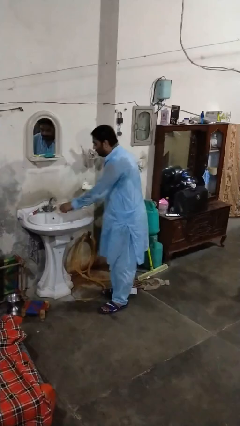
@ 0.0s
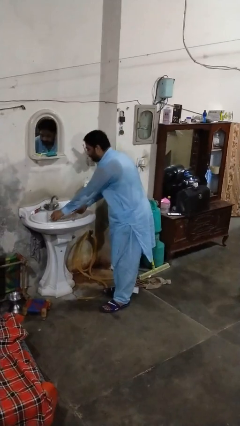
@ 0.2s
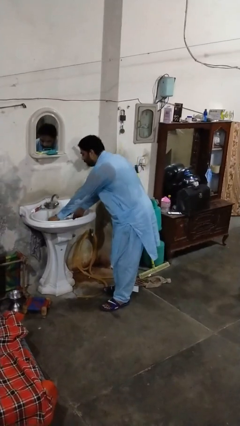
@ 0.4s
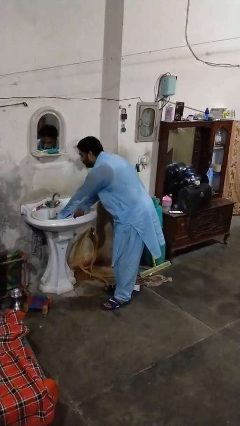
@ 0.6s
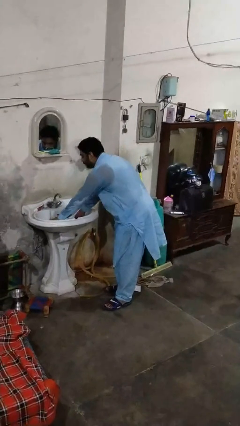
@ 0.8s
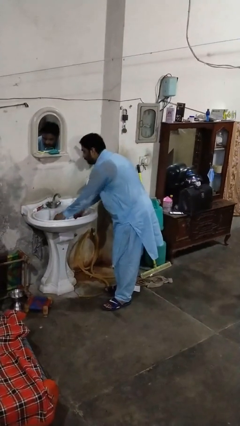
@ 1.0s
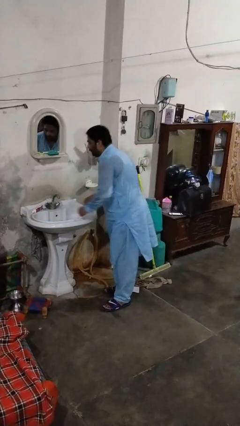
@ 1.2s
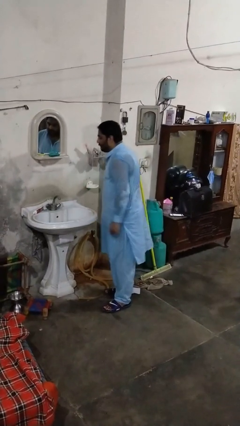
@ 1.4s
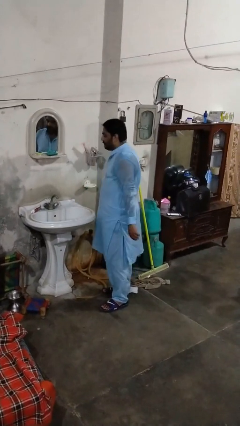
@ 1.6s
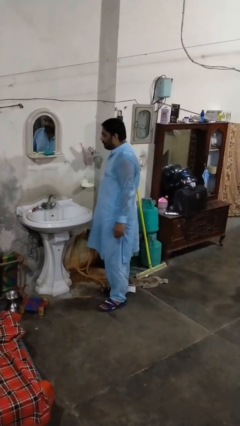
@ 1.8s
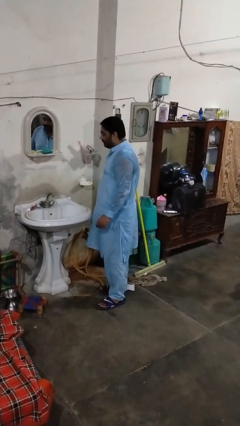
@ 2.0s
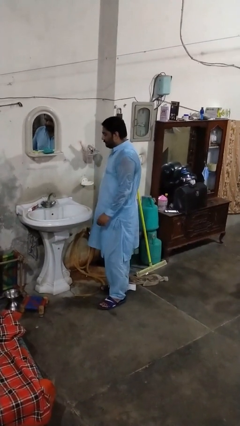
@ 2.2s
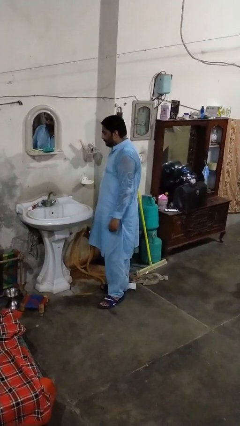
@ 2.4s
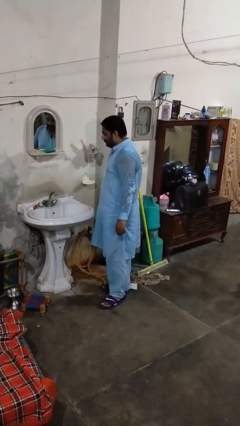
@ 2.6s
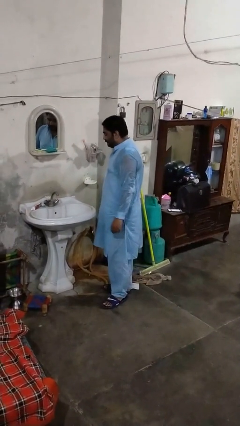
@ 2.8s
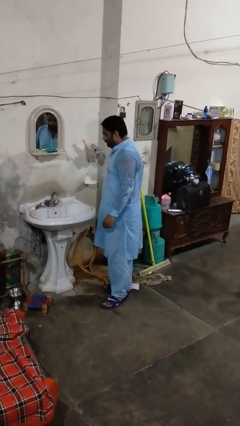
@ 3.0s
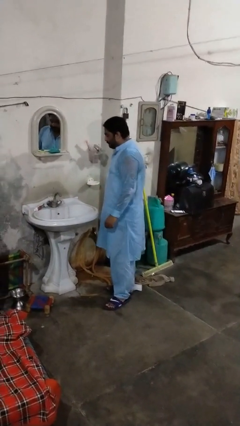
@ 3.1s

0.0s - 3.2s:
person loads dishwasher

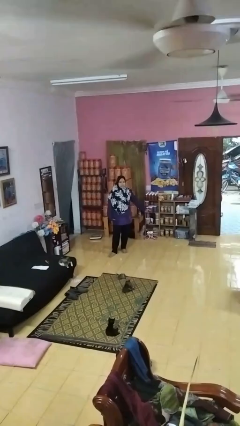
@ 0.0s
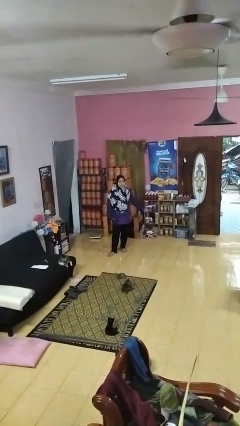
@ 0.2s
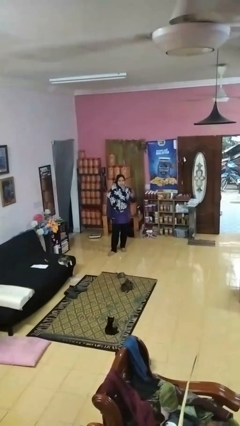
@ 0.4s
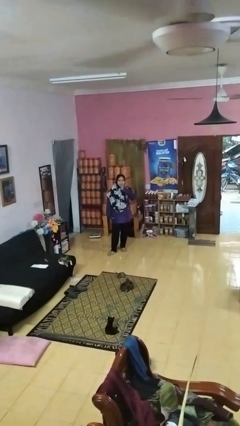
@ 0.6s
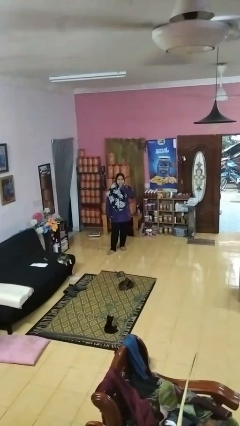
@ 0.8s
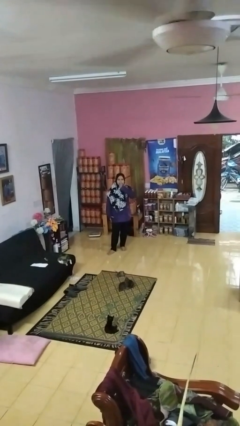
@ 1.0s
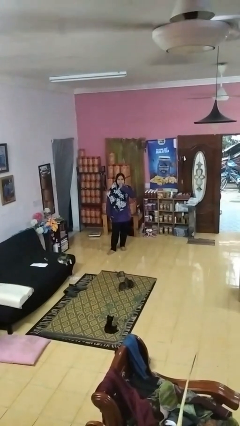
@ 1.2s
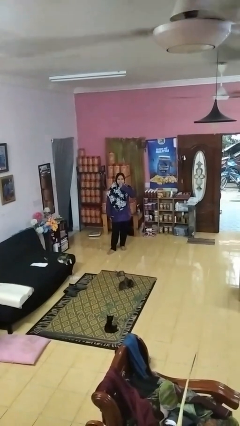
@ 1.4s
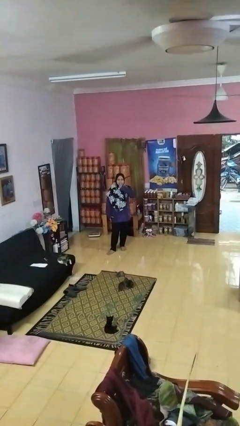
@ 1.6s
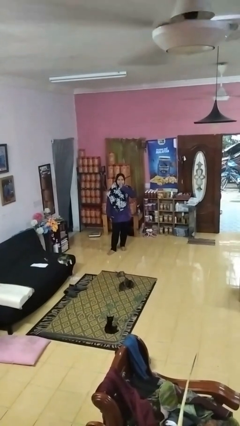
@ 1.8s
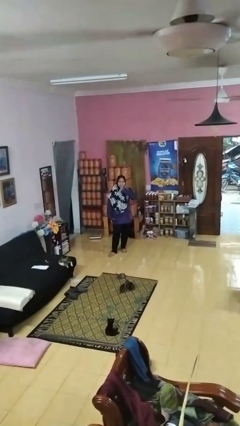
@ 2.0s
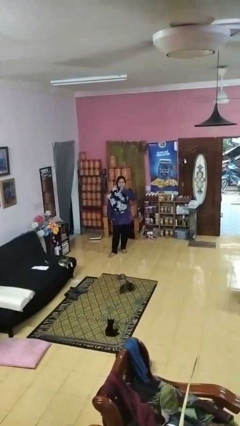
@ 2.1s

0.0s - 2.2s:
person gestures be quiet

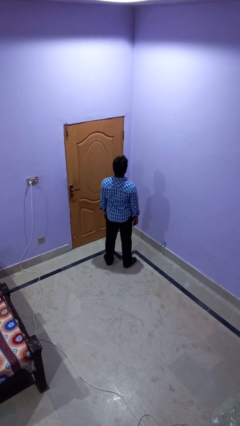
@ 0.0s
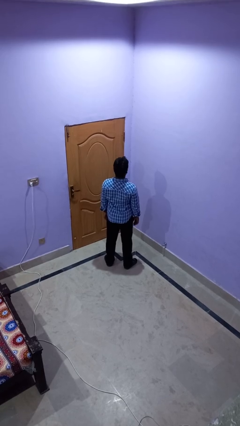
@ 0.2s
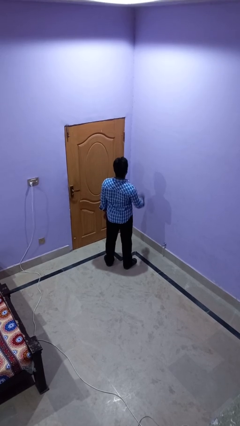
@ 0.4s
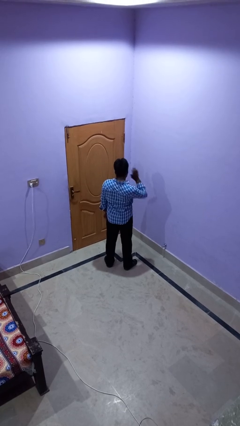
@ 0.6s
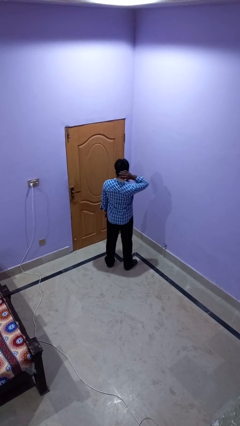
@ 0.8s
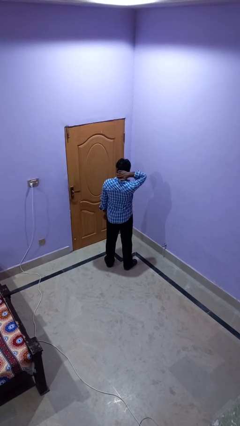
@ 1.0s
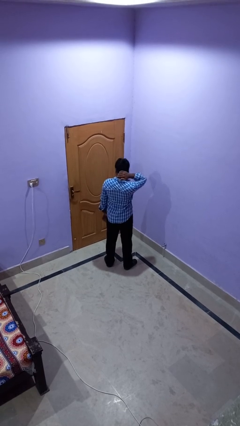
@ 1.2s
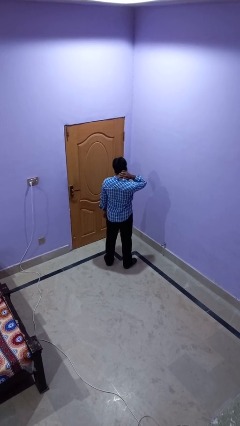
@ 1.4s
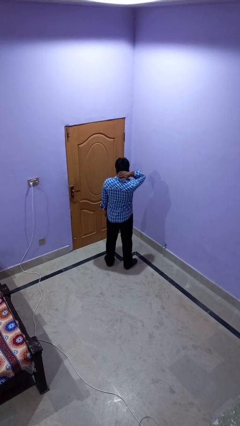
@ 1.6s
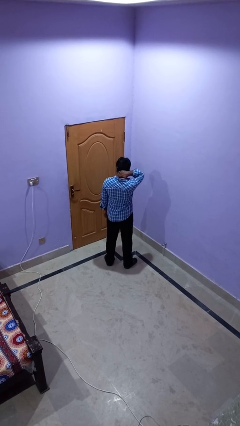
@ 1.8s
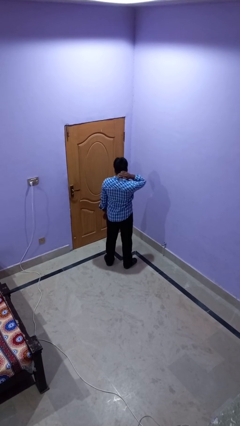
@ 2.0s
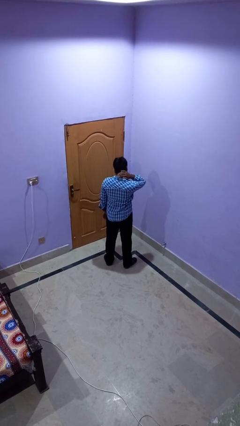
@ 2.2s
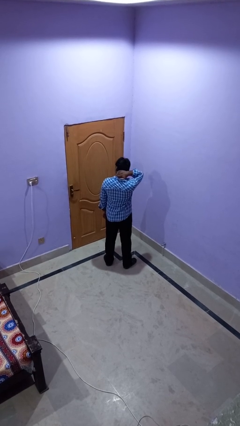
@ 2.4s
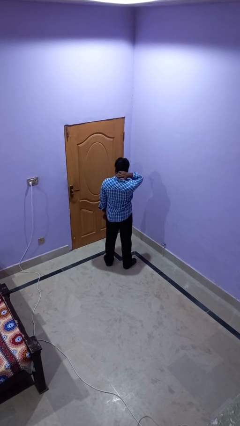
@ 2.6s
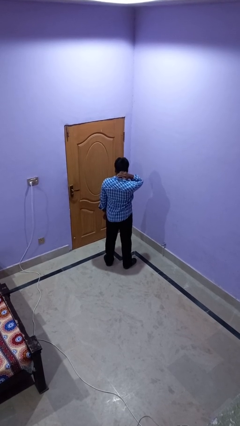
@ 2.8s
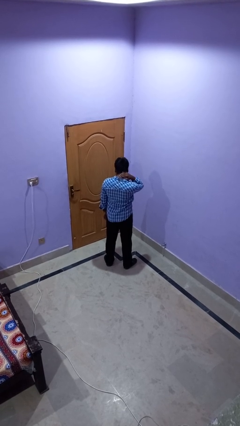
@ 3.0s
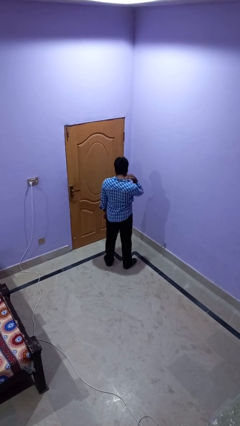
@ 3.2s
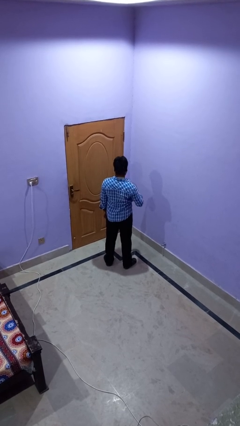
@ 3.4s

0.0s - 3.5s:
person rubs neck

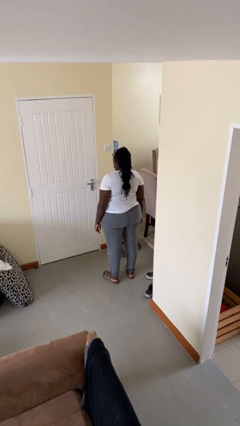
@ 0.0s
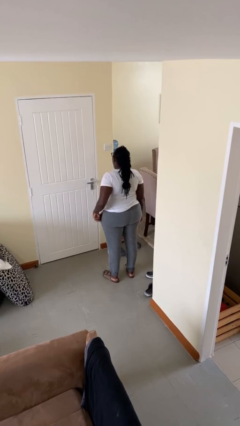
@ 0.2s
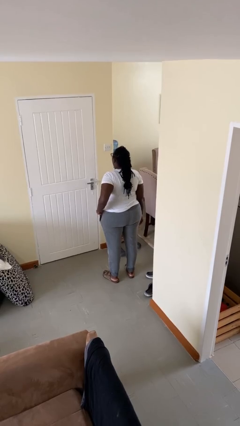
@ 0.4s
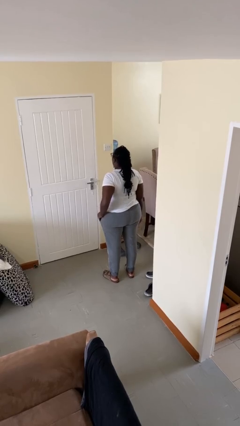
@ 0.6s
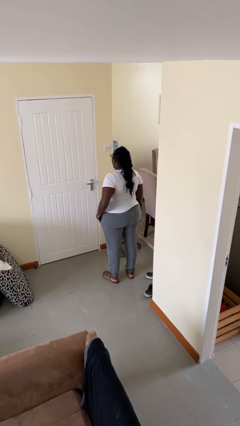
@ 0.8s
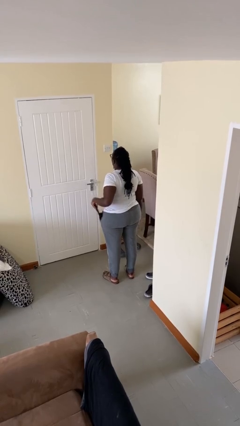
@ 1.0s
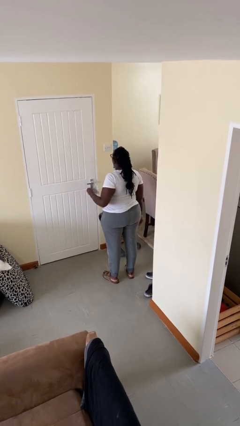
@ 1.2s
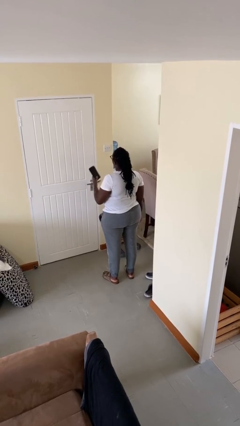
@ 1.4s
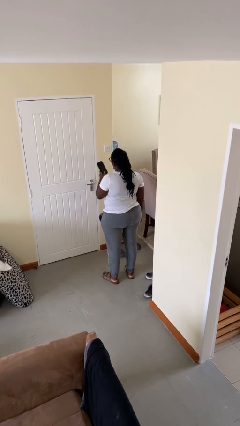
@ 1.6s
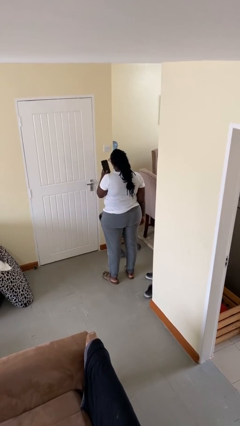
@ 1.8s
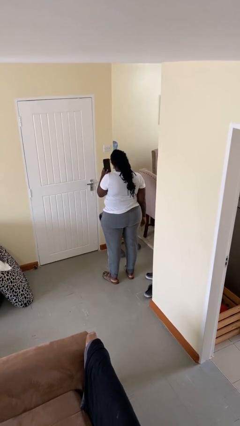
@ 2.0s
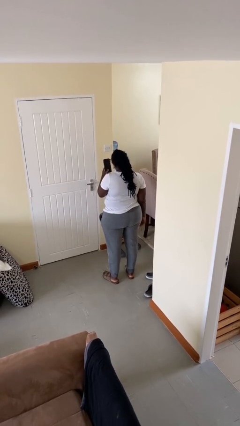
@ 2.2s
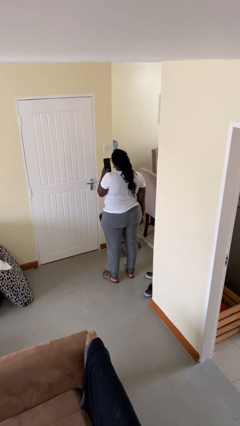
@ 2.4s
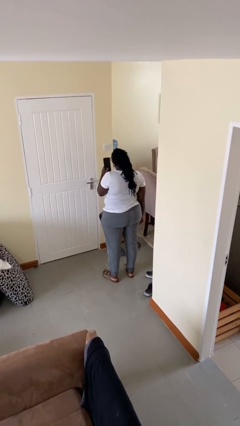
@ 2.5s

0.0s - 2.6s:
person takes phone from pocket

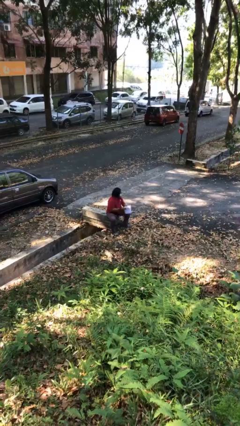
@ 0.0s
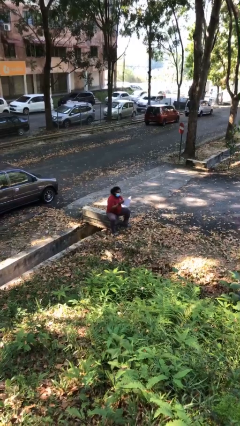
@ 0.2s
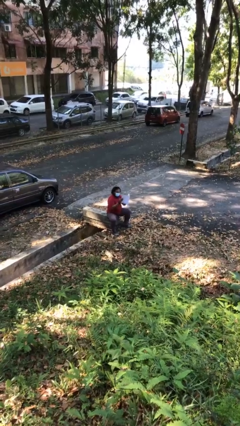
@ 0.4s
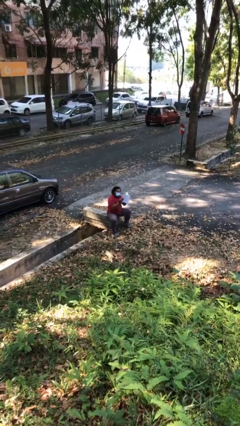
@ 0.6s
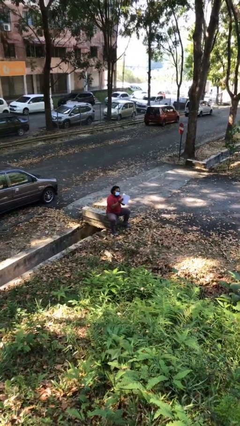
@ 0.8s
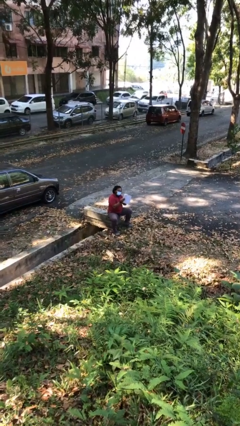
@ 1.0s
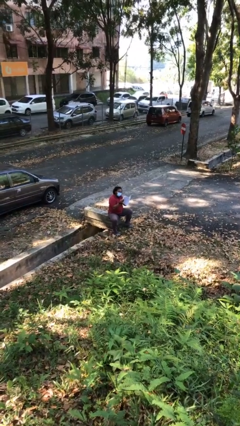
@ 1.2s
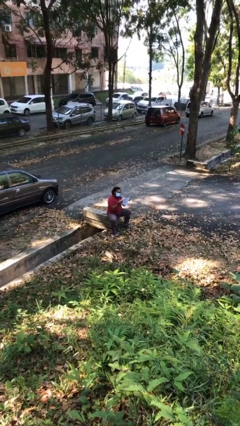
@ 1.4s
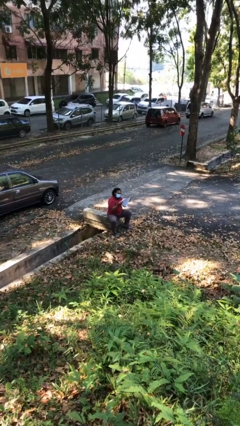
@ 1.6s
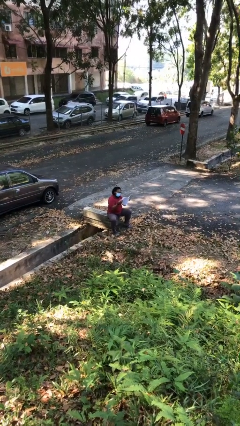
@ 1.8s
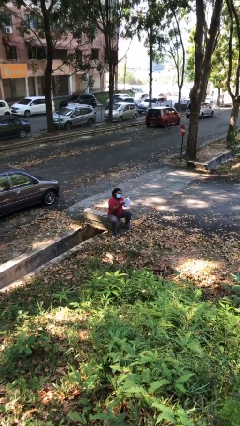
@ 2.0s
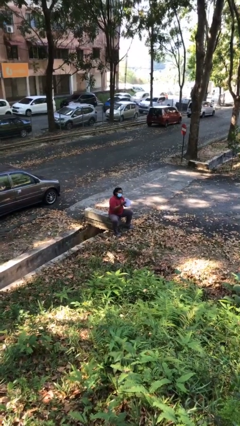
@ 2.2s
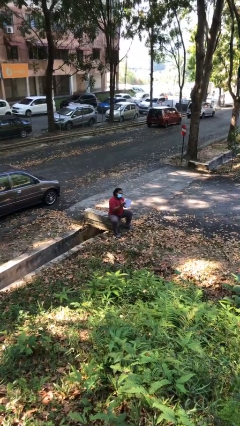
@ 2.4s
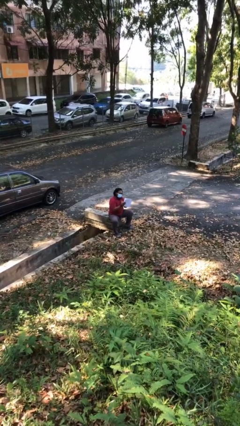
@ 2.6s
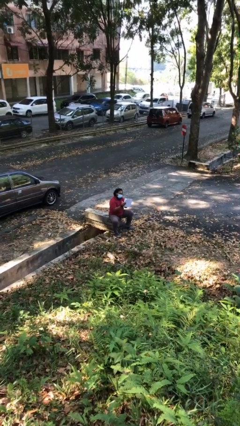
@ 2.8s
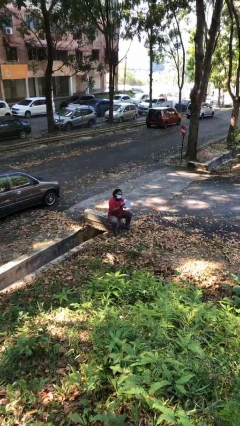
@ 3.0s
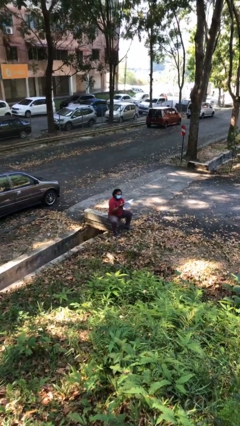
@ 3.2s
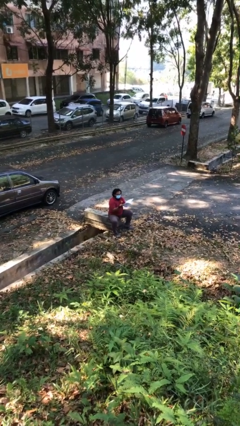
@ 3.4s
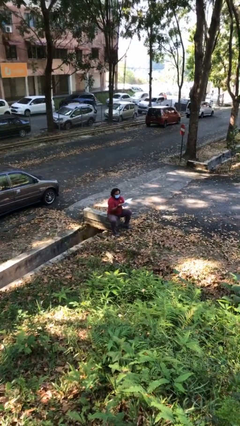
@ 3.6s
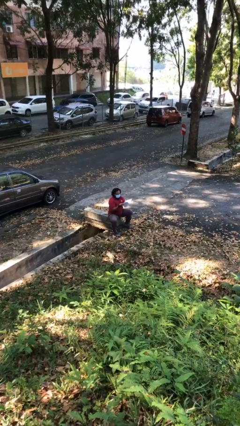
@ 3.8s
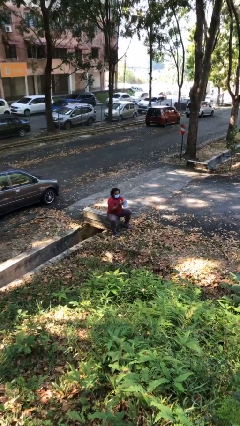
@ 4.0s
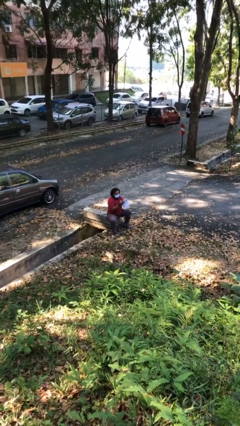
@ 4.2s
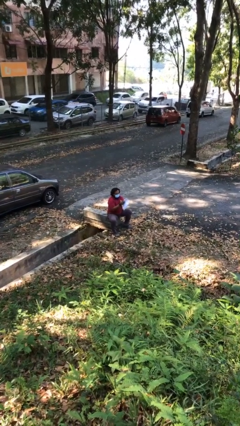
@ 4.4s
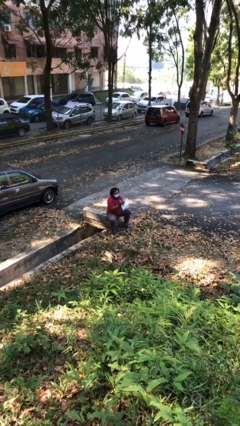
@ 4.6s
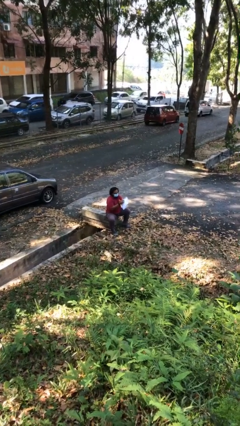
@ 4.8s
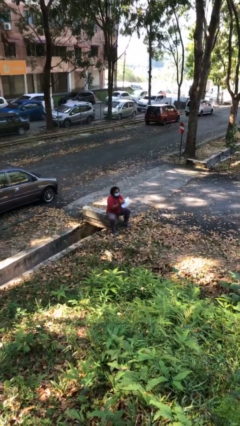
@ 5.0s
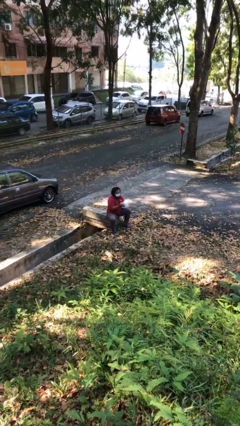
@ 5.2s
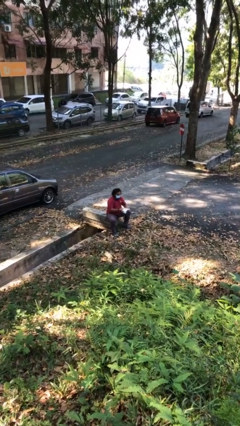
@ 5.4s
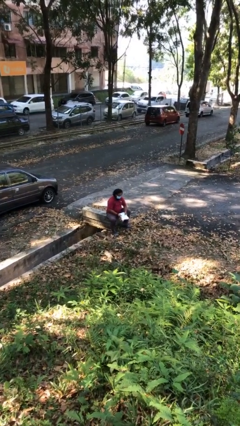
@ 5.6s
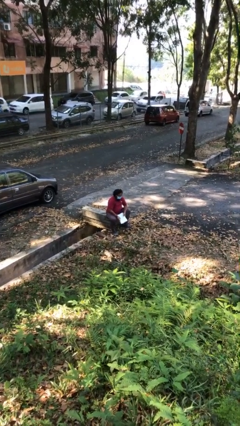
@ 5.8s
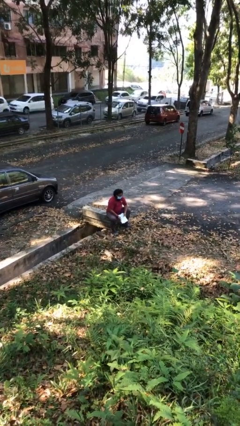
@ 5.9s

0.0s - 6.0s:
person reads document
